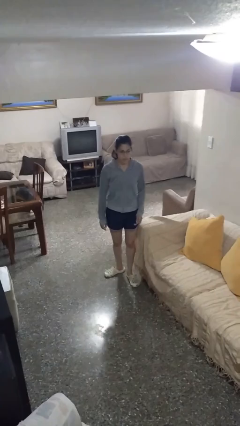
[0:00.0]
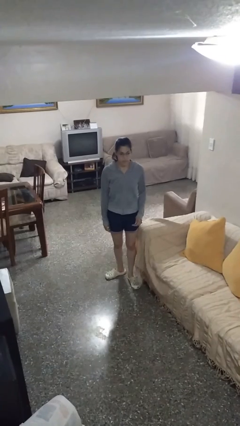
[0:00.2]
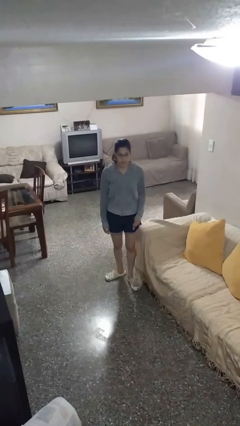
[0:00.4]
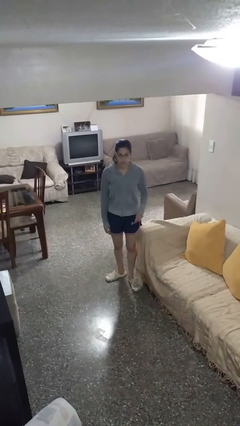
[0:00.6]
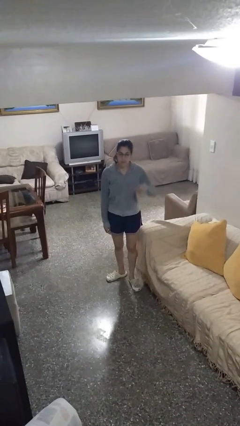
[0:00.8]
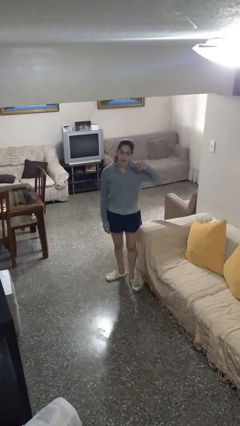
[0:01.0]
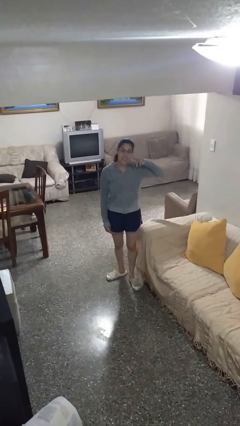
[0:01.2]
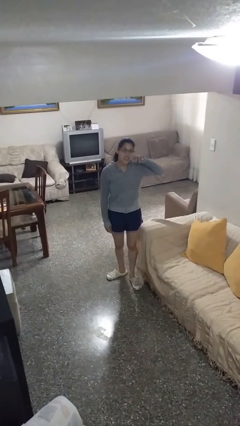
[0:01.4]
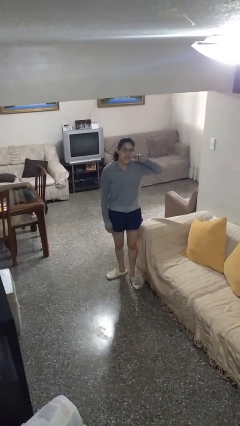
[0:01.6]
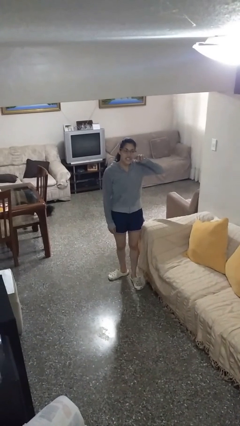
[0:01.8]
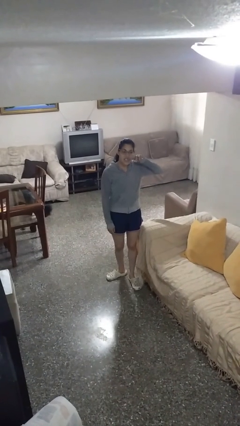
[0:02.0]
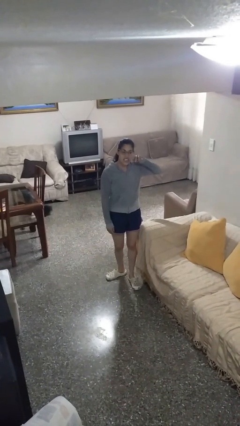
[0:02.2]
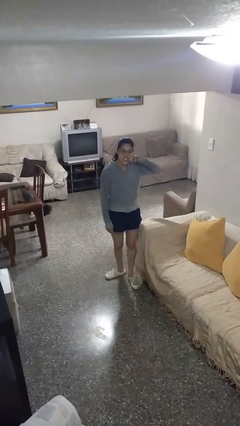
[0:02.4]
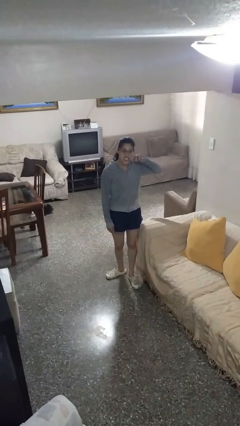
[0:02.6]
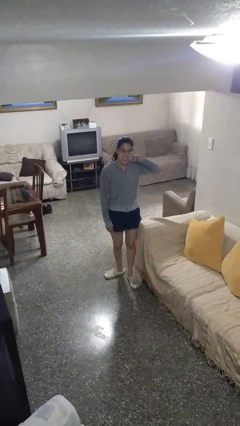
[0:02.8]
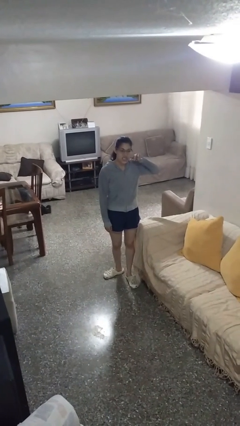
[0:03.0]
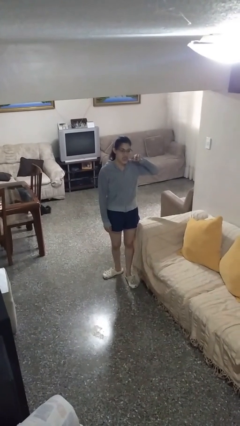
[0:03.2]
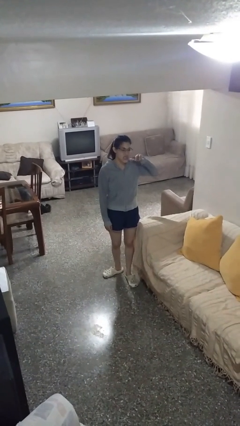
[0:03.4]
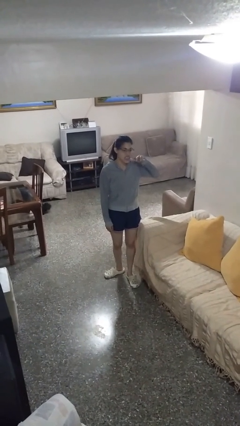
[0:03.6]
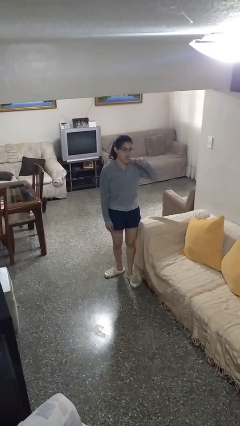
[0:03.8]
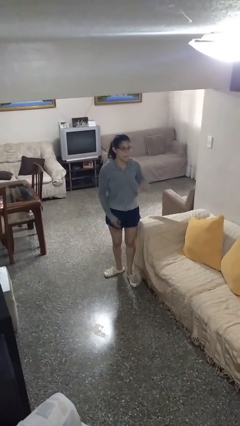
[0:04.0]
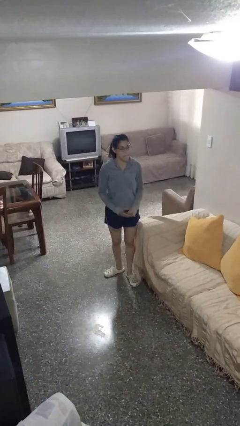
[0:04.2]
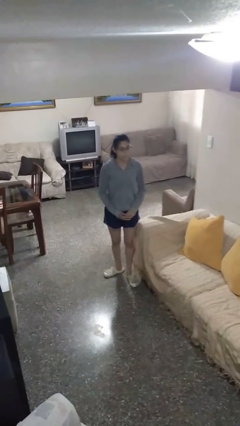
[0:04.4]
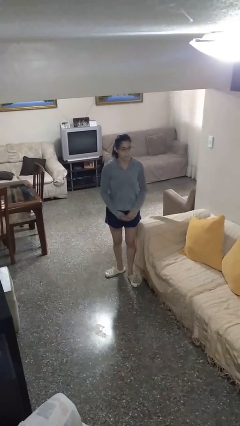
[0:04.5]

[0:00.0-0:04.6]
person brushes teeth

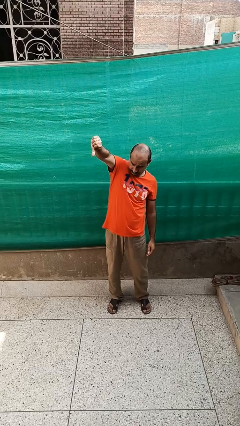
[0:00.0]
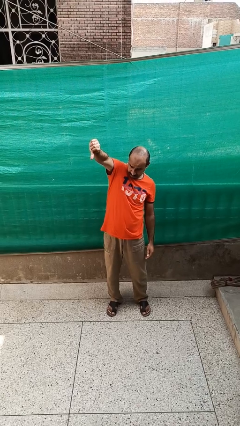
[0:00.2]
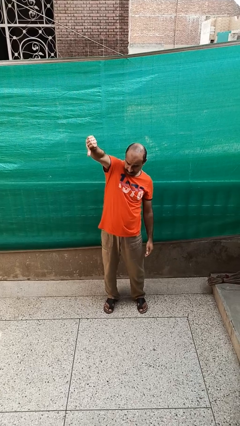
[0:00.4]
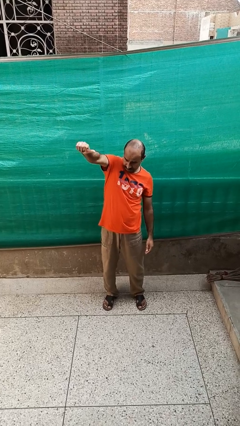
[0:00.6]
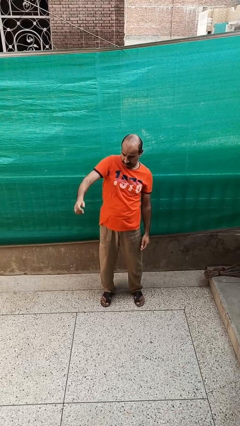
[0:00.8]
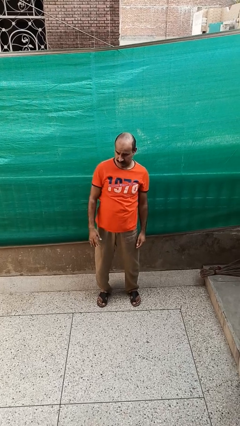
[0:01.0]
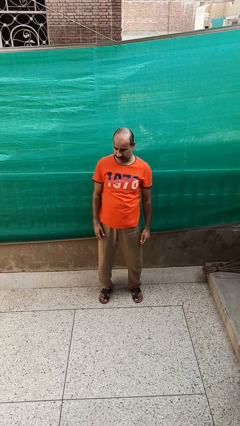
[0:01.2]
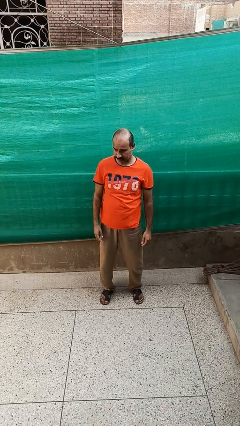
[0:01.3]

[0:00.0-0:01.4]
person gestures thumbs down

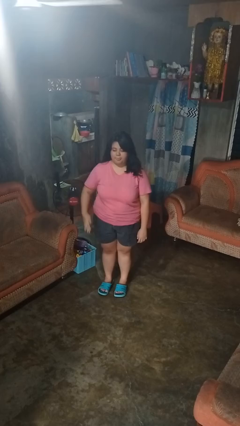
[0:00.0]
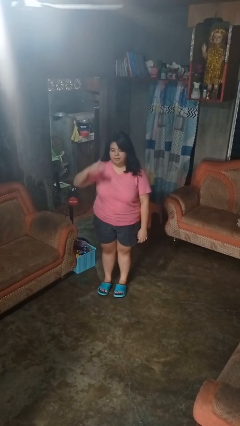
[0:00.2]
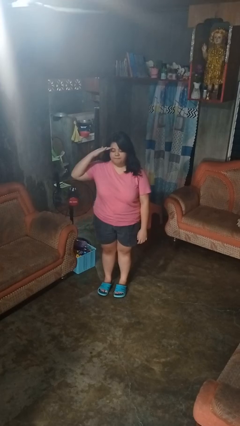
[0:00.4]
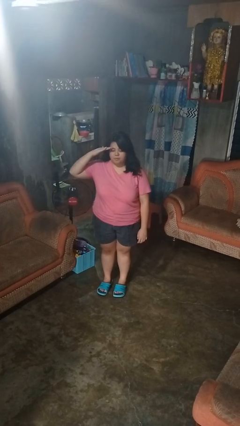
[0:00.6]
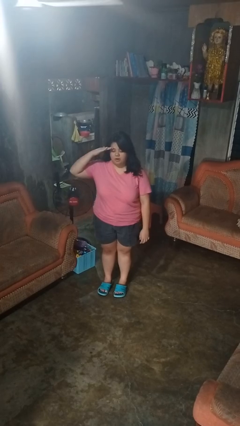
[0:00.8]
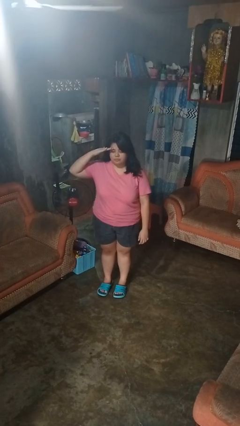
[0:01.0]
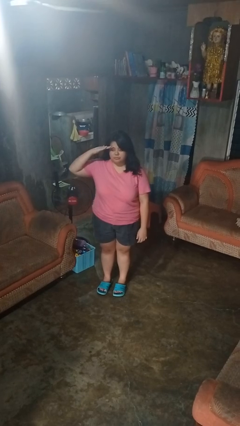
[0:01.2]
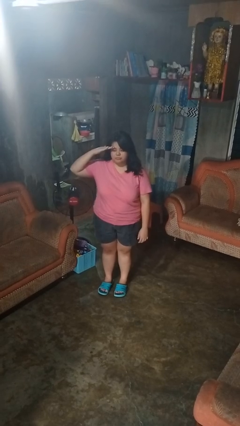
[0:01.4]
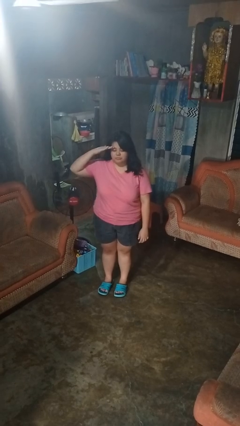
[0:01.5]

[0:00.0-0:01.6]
person salutes

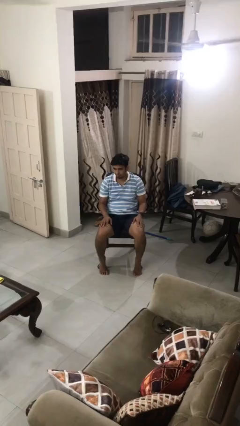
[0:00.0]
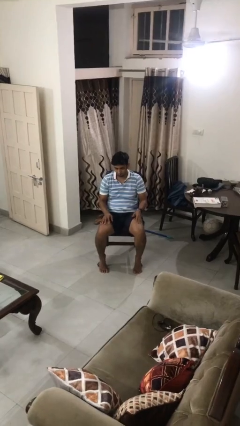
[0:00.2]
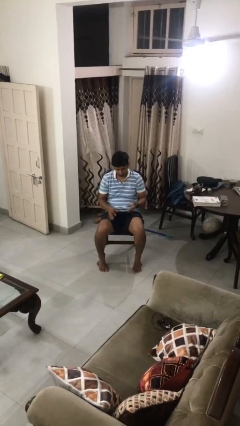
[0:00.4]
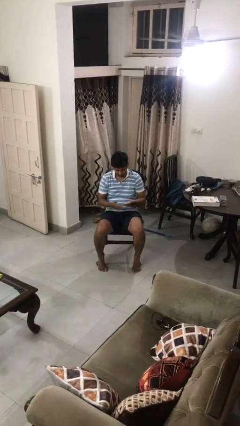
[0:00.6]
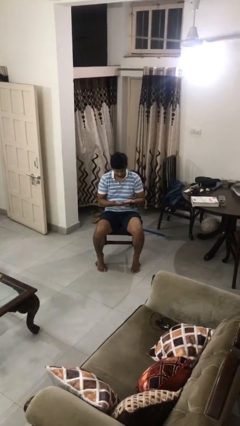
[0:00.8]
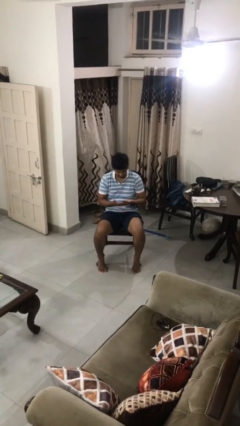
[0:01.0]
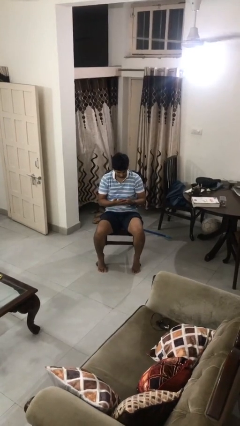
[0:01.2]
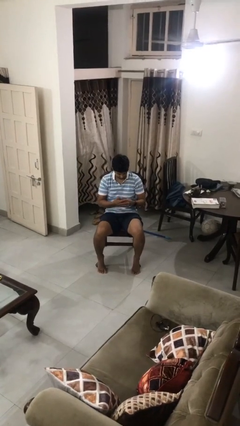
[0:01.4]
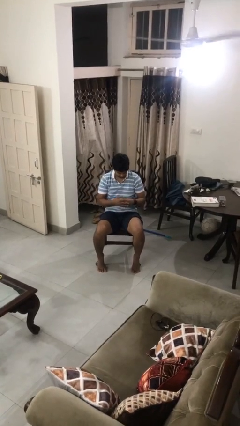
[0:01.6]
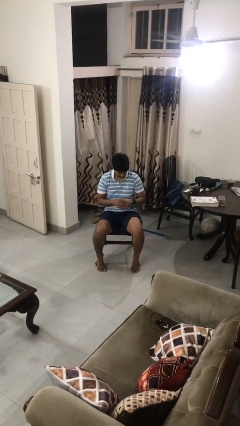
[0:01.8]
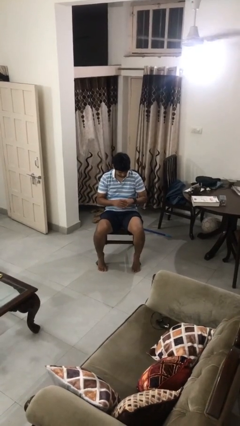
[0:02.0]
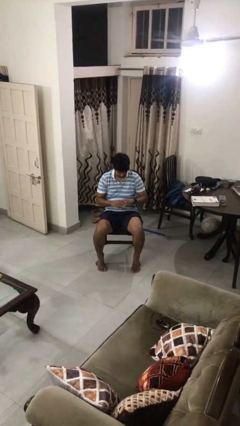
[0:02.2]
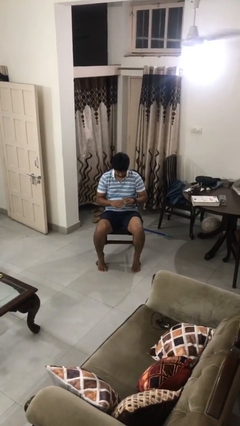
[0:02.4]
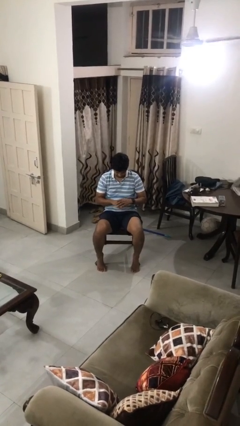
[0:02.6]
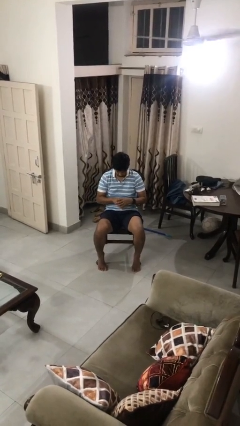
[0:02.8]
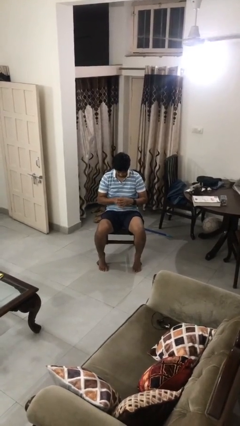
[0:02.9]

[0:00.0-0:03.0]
person looks at hands in lap

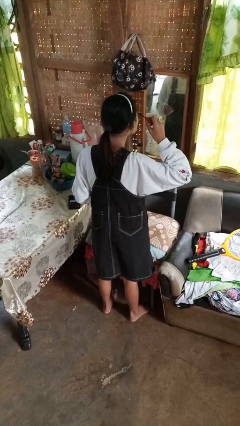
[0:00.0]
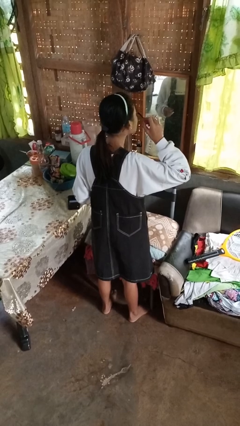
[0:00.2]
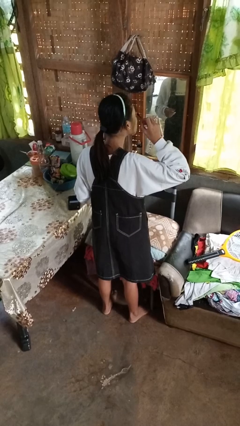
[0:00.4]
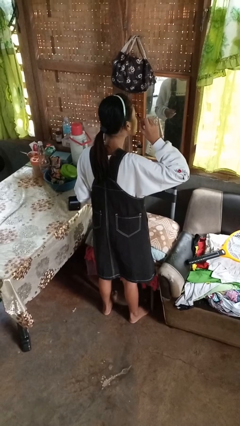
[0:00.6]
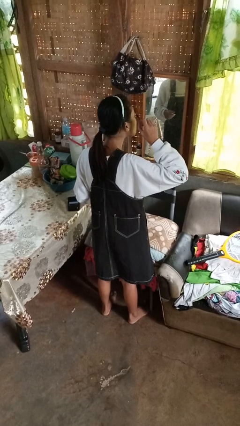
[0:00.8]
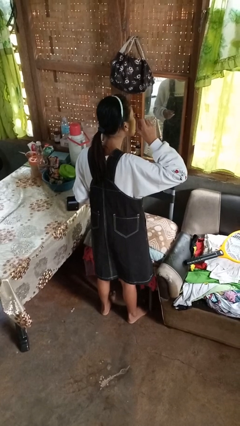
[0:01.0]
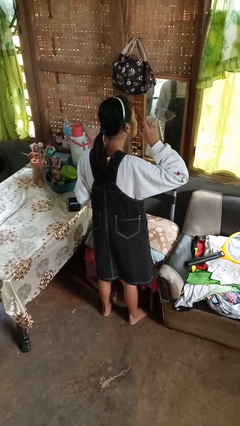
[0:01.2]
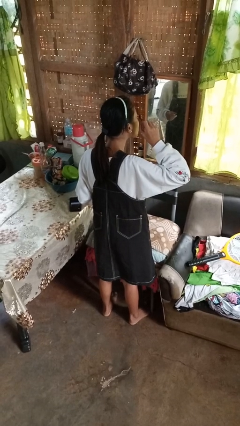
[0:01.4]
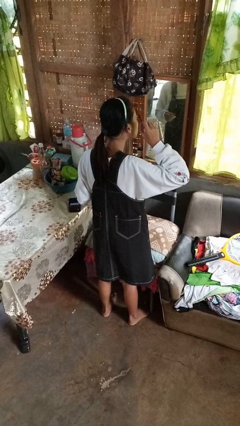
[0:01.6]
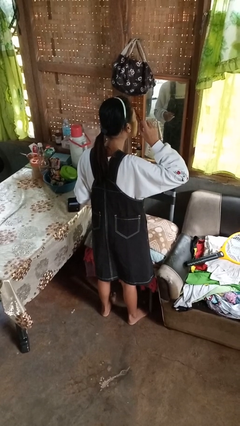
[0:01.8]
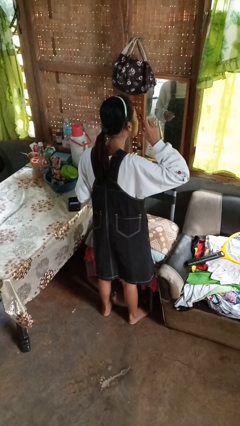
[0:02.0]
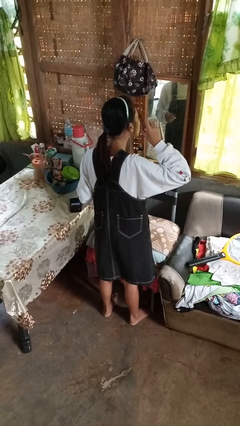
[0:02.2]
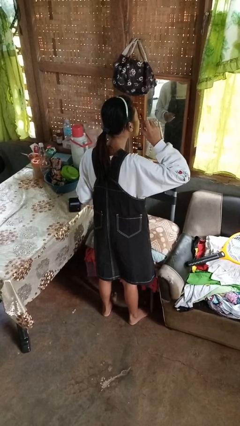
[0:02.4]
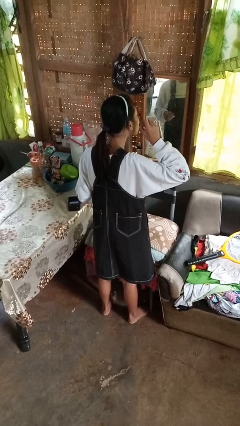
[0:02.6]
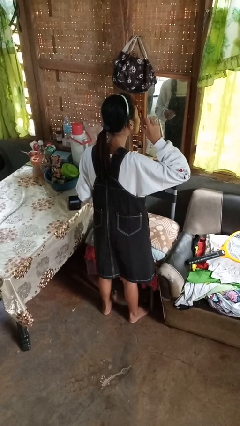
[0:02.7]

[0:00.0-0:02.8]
person applies eye makeup

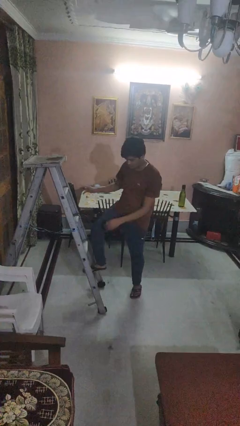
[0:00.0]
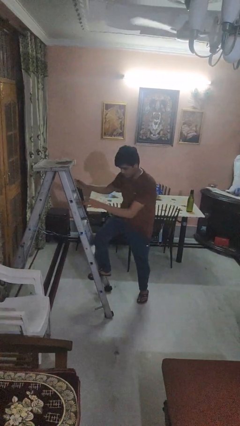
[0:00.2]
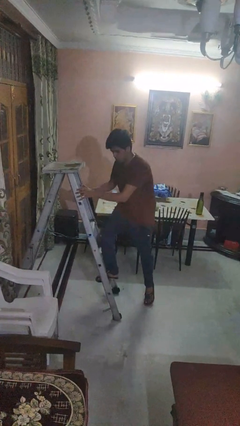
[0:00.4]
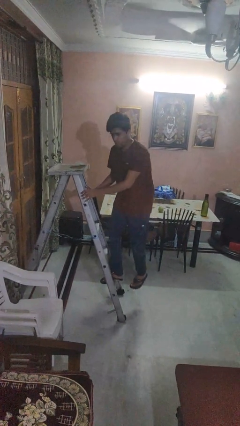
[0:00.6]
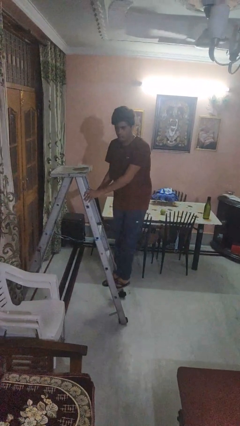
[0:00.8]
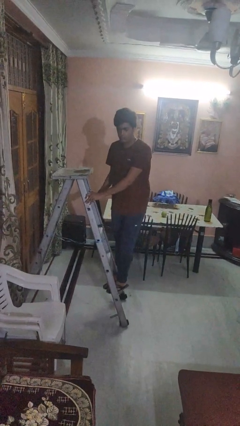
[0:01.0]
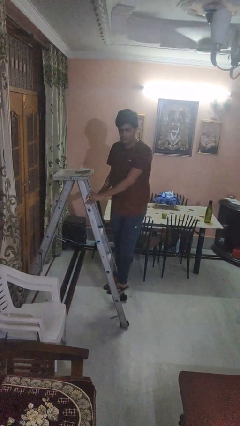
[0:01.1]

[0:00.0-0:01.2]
person climbs up ladder

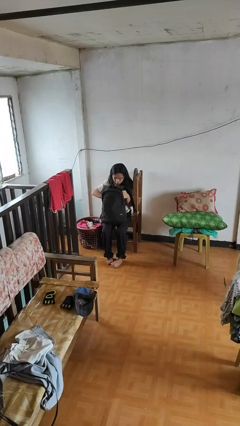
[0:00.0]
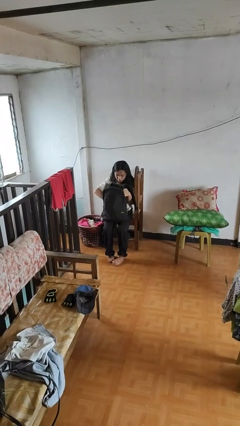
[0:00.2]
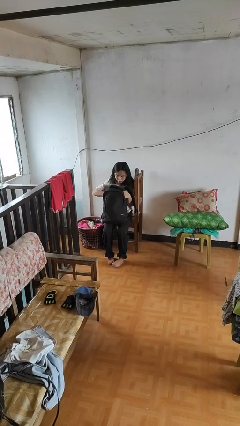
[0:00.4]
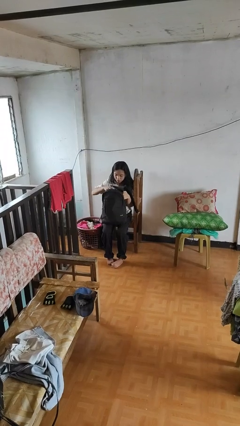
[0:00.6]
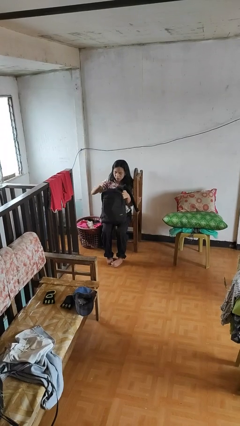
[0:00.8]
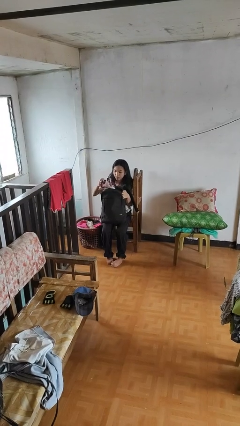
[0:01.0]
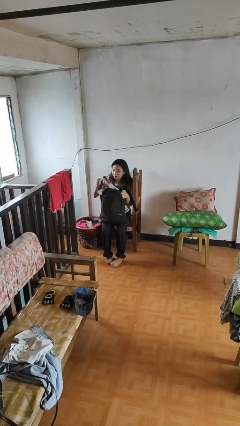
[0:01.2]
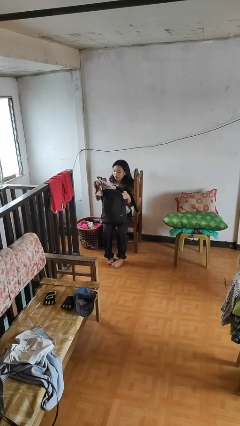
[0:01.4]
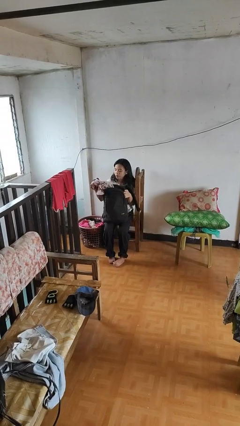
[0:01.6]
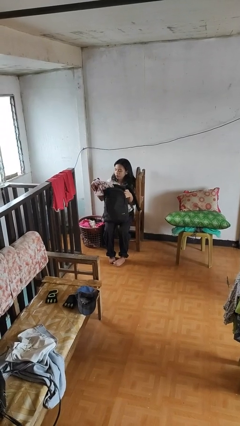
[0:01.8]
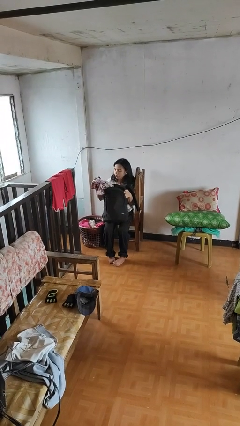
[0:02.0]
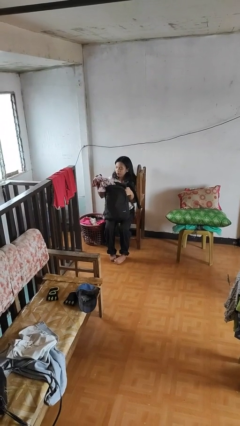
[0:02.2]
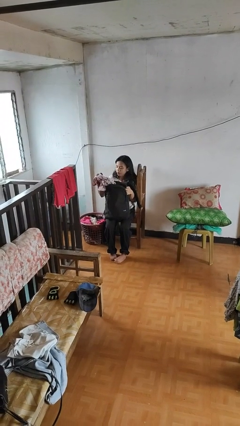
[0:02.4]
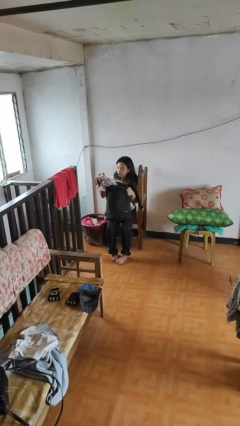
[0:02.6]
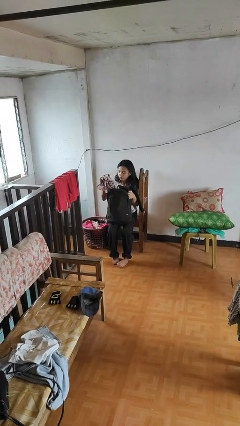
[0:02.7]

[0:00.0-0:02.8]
person takes object from backpack
